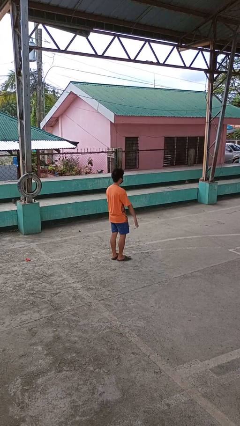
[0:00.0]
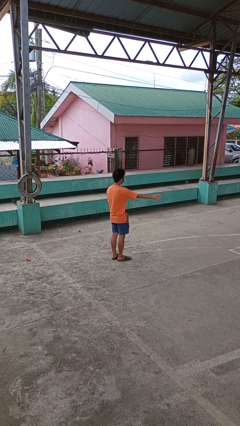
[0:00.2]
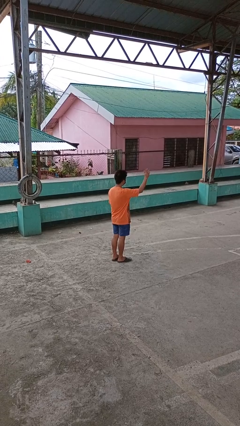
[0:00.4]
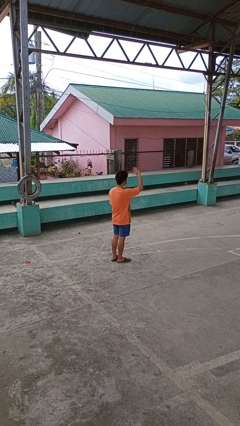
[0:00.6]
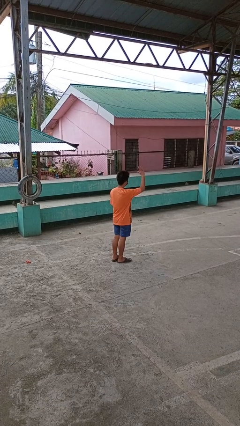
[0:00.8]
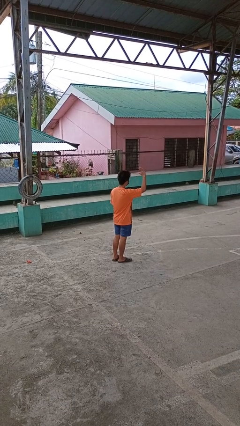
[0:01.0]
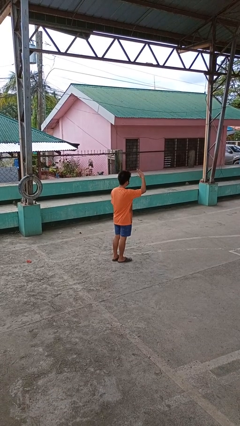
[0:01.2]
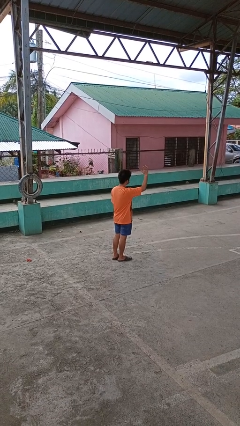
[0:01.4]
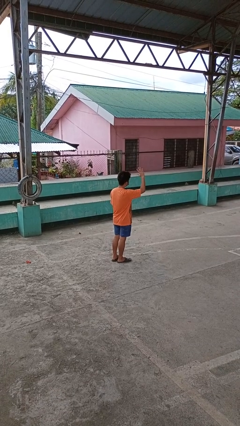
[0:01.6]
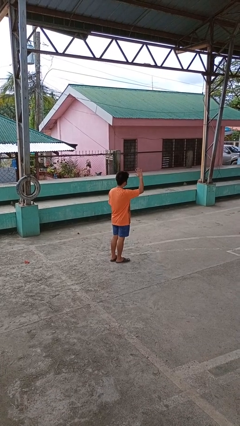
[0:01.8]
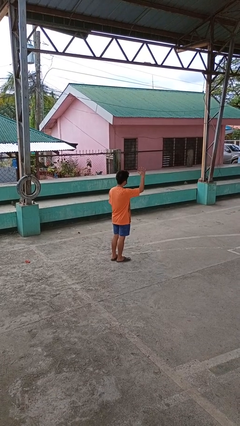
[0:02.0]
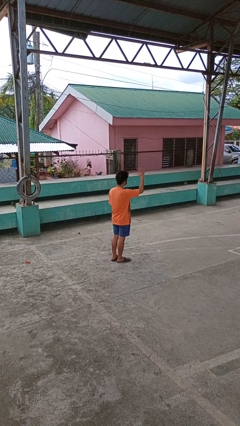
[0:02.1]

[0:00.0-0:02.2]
person waves at person

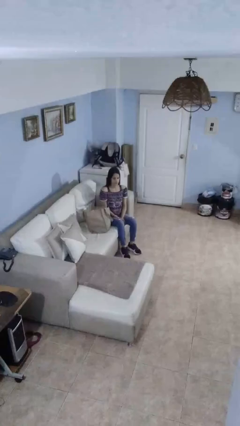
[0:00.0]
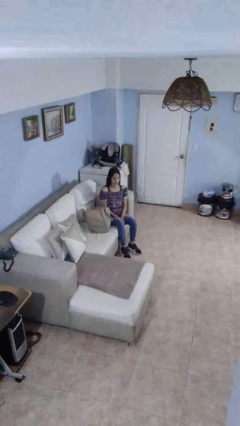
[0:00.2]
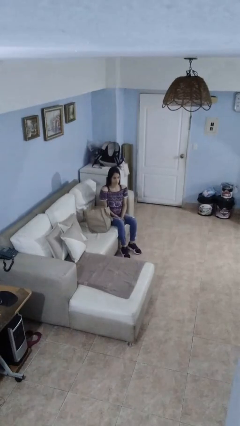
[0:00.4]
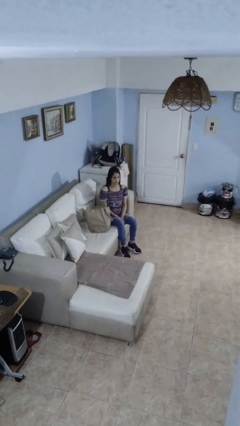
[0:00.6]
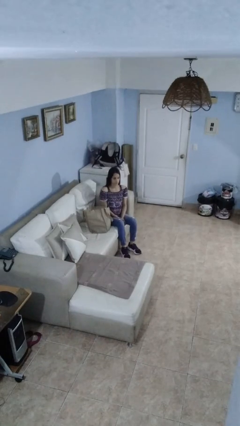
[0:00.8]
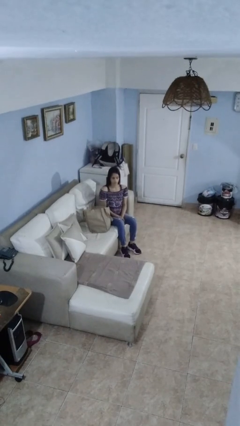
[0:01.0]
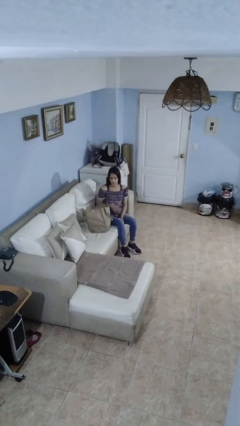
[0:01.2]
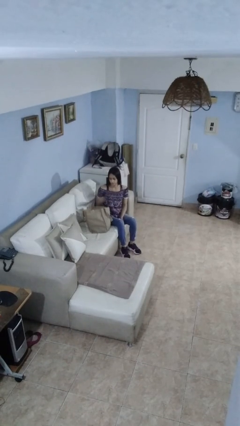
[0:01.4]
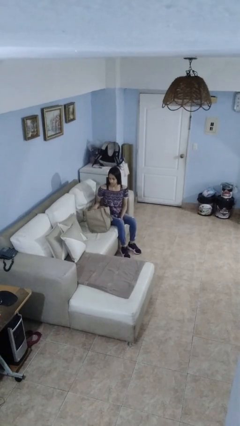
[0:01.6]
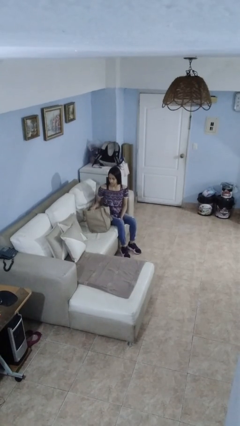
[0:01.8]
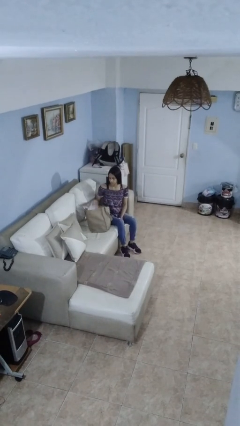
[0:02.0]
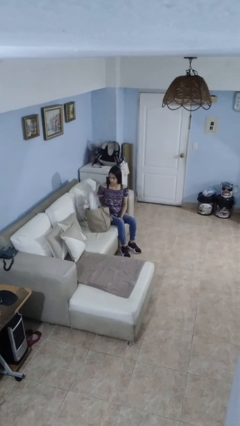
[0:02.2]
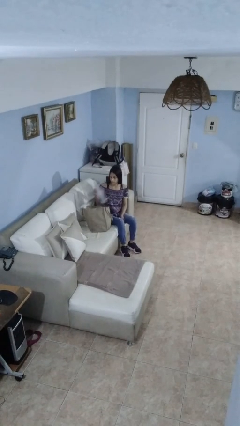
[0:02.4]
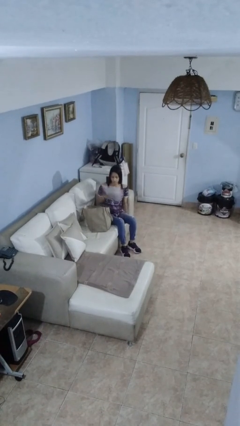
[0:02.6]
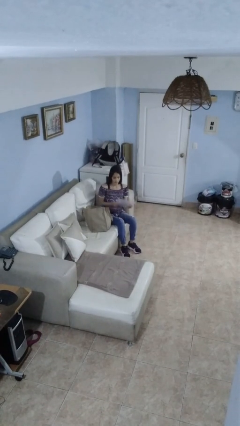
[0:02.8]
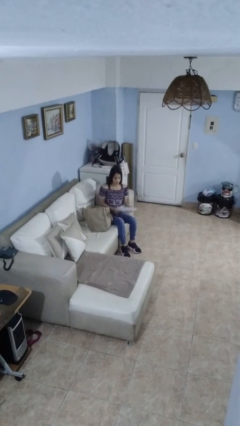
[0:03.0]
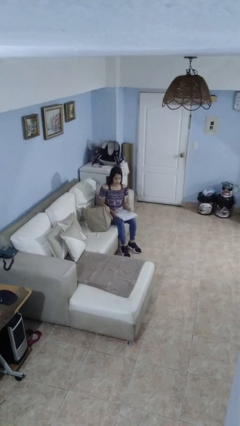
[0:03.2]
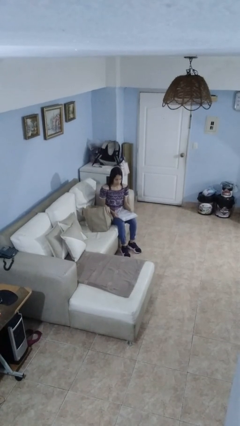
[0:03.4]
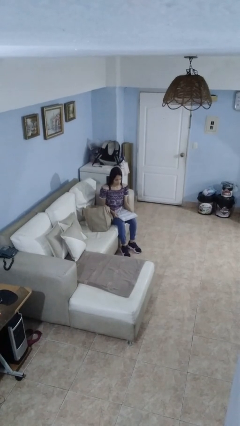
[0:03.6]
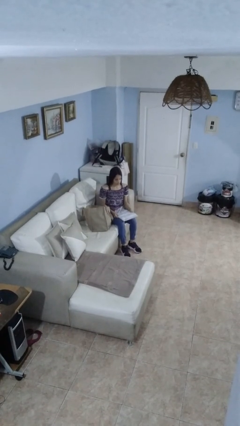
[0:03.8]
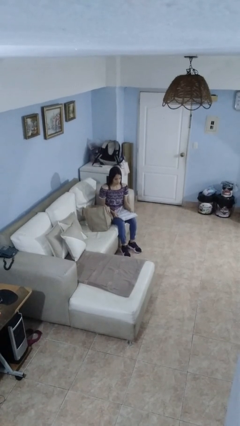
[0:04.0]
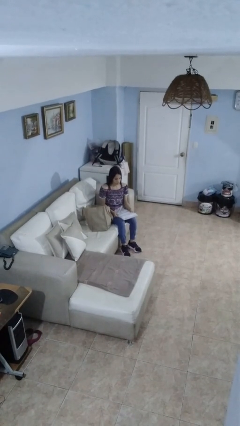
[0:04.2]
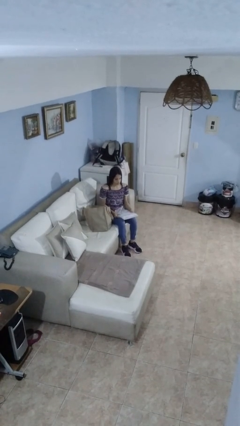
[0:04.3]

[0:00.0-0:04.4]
person takes object from bag

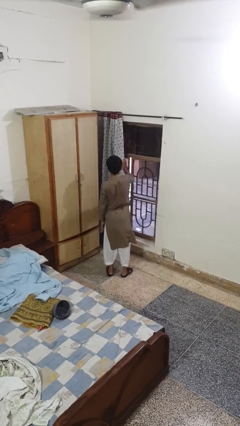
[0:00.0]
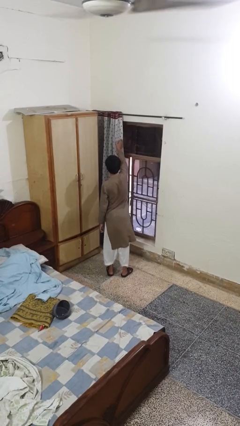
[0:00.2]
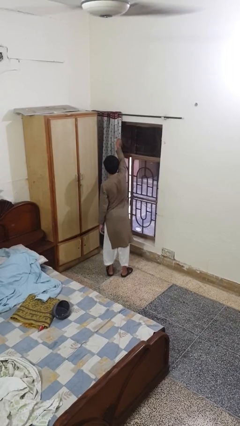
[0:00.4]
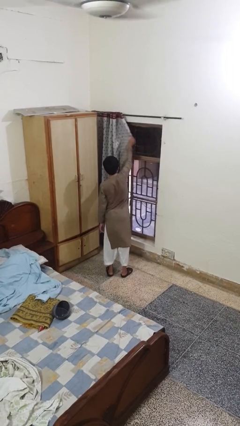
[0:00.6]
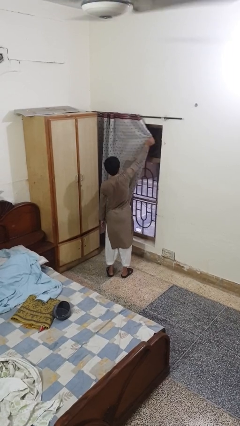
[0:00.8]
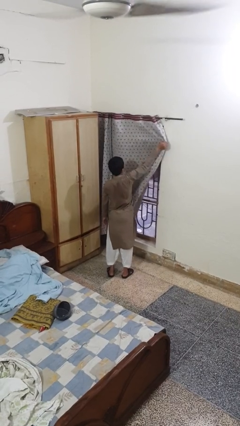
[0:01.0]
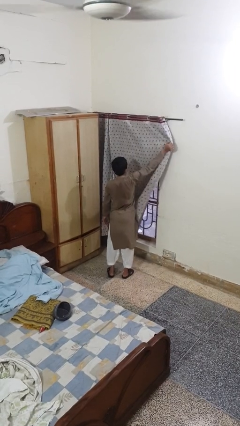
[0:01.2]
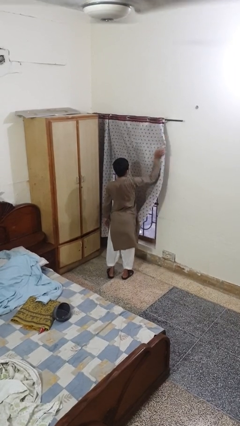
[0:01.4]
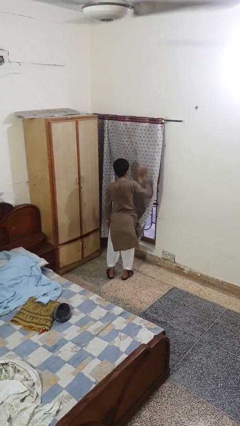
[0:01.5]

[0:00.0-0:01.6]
person closes curtains

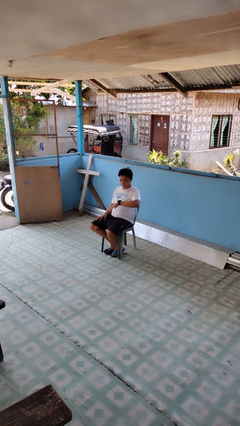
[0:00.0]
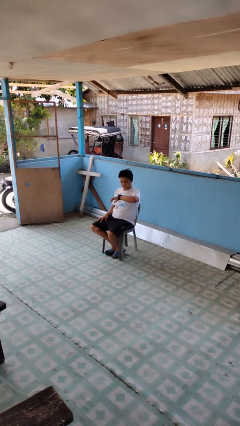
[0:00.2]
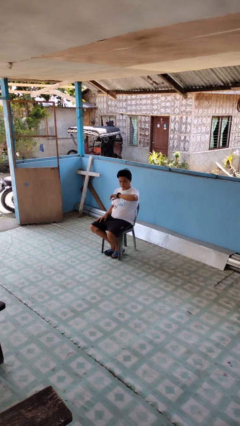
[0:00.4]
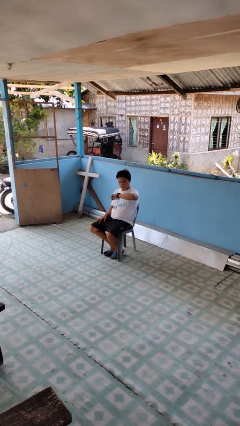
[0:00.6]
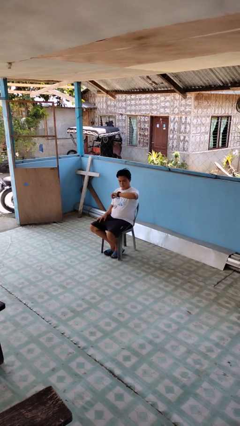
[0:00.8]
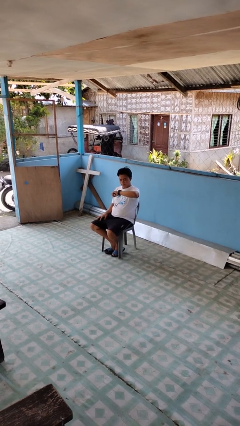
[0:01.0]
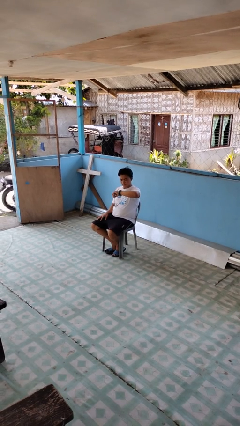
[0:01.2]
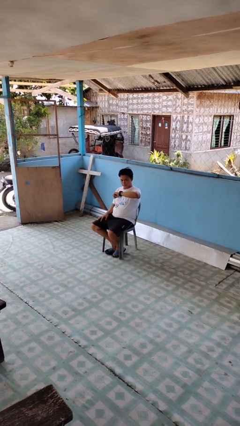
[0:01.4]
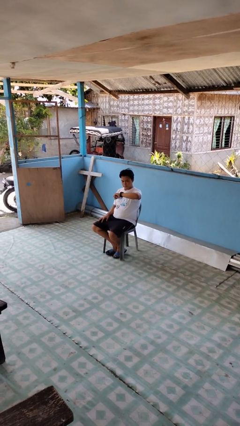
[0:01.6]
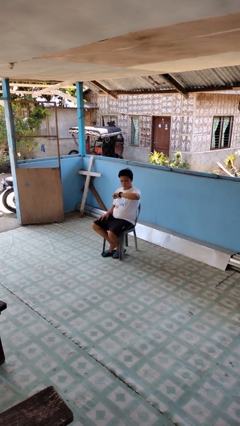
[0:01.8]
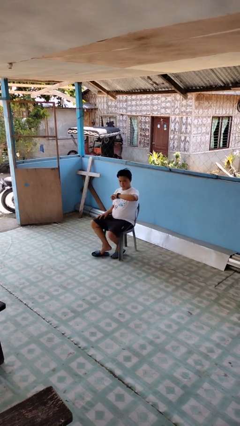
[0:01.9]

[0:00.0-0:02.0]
person looks at wristwatch

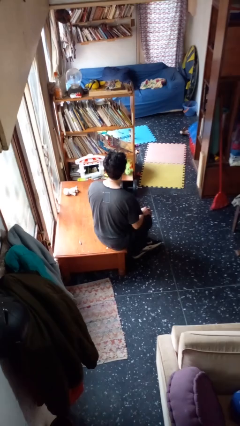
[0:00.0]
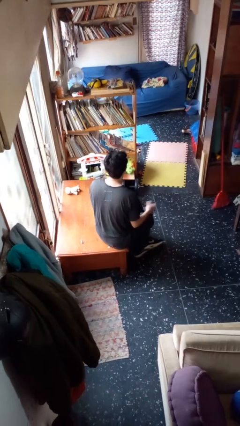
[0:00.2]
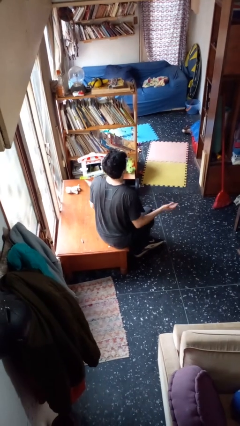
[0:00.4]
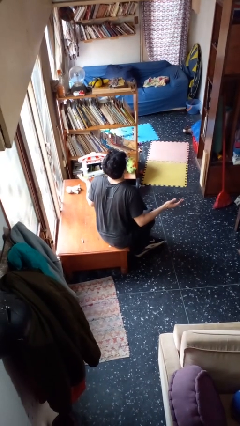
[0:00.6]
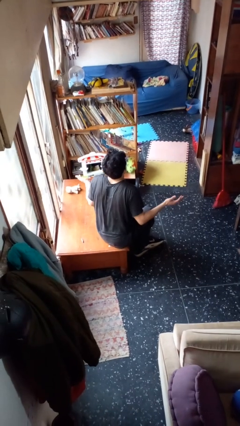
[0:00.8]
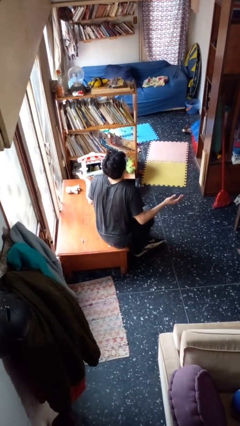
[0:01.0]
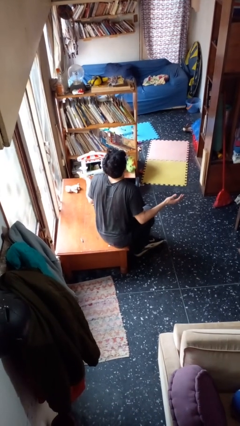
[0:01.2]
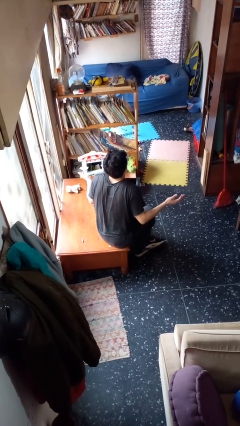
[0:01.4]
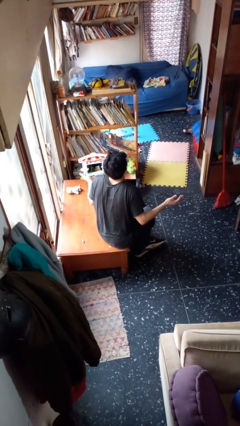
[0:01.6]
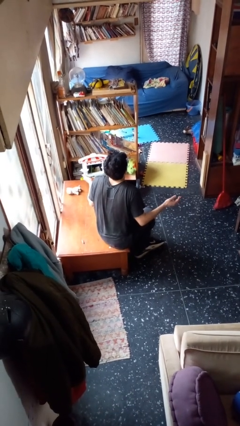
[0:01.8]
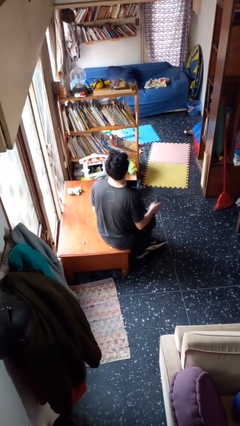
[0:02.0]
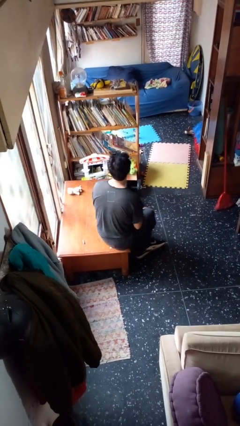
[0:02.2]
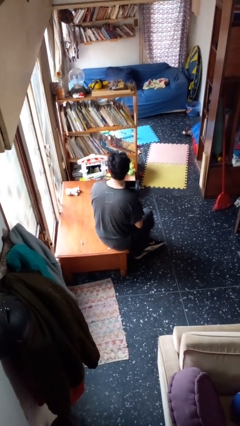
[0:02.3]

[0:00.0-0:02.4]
person shrugs

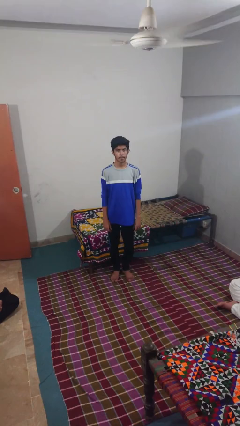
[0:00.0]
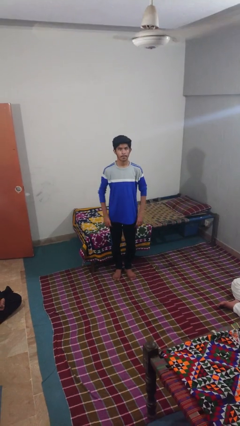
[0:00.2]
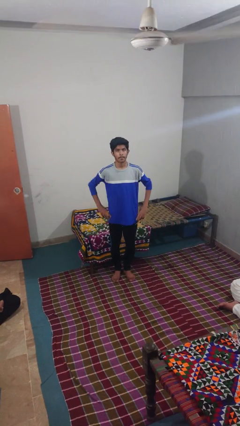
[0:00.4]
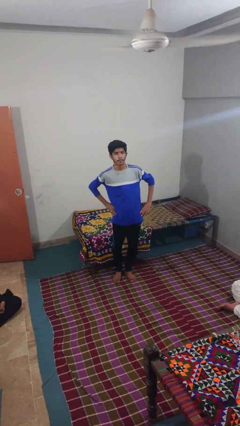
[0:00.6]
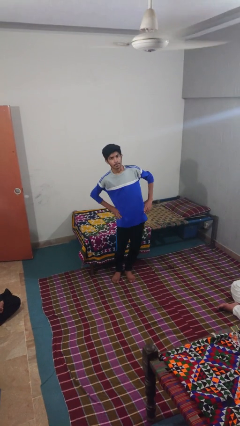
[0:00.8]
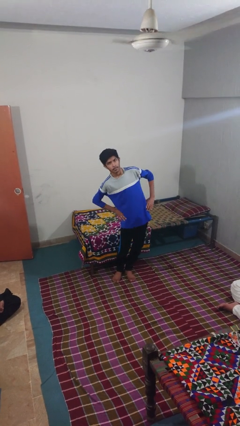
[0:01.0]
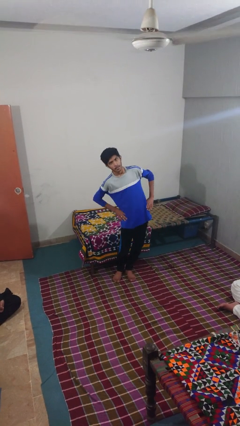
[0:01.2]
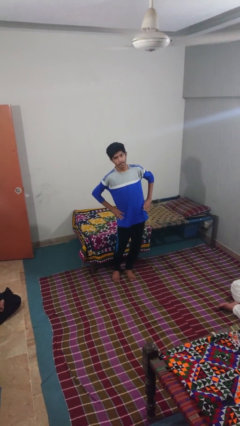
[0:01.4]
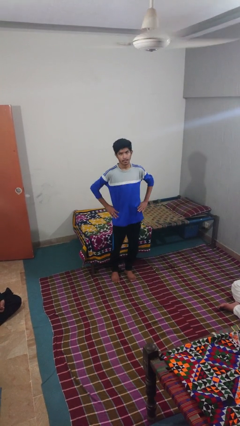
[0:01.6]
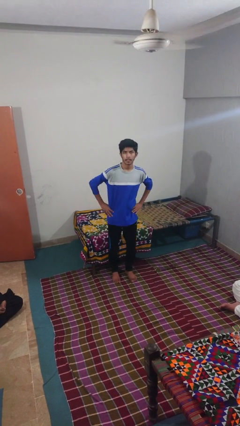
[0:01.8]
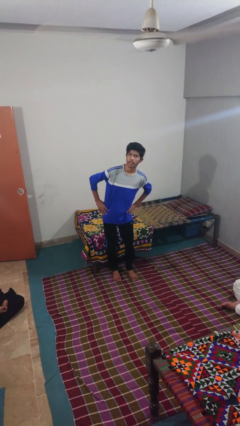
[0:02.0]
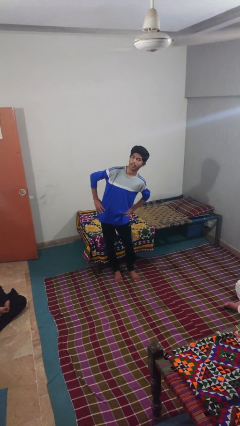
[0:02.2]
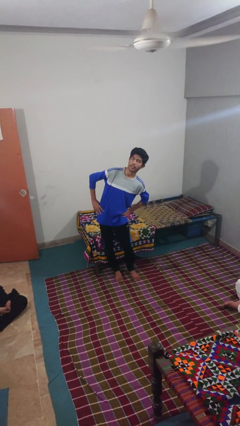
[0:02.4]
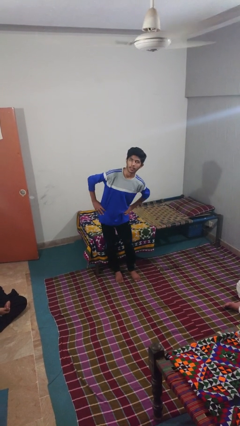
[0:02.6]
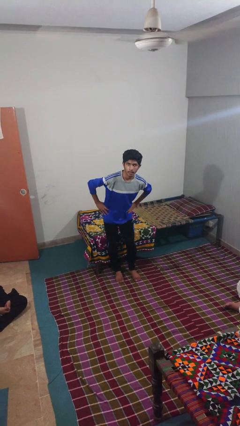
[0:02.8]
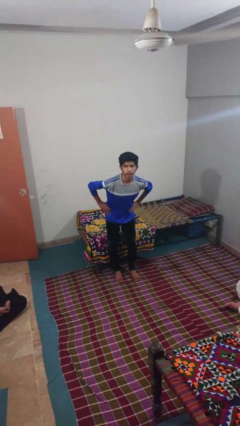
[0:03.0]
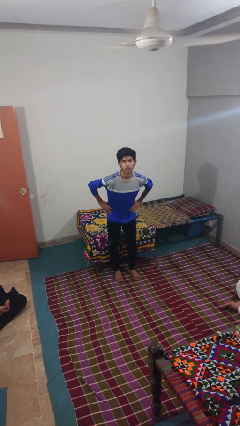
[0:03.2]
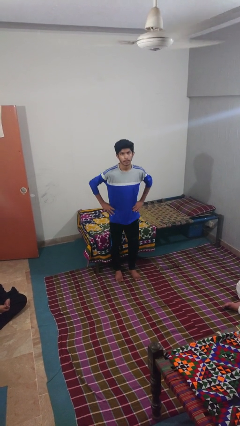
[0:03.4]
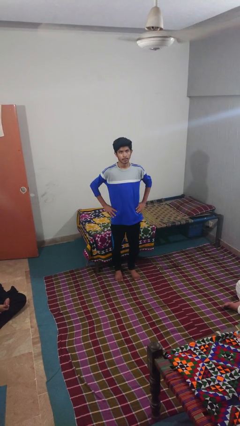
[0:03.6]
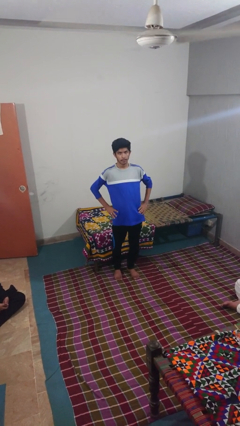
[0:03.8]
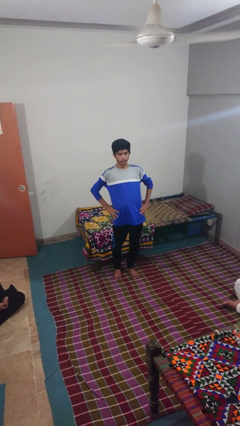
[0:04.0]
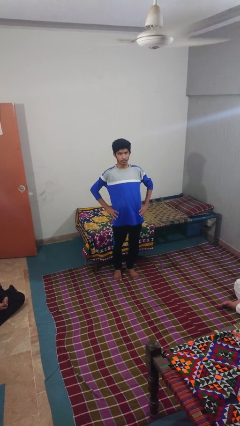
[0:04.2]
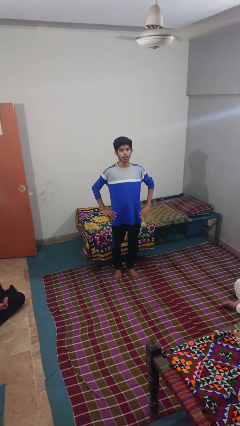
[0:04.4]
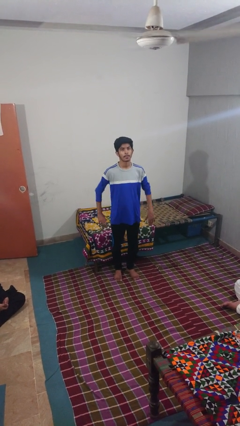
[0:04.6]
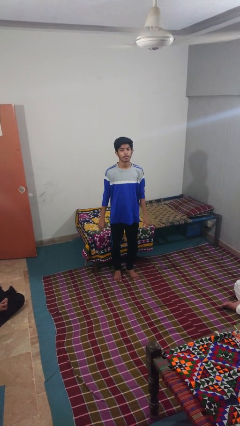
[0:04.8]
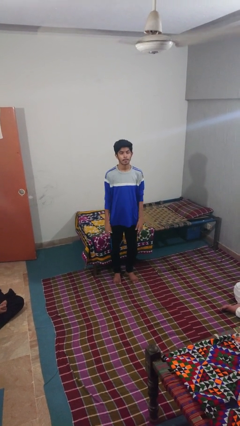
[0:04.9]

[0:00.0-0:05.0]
person wiggles hips
